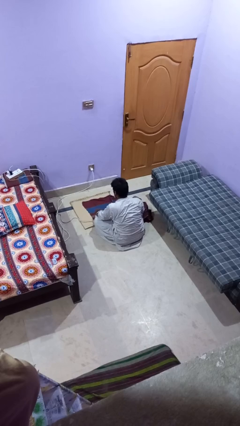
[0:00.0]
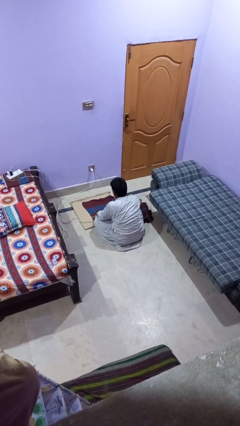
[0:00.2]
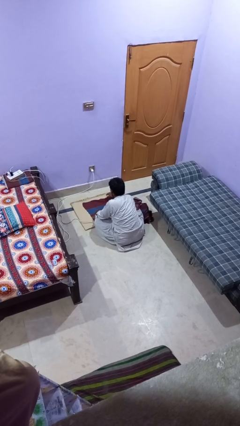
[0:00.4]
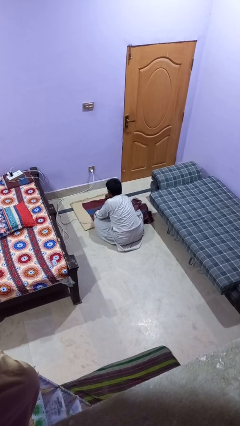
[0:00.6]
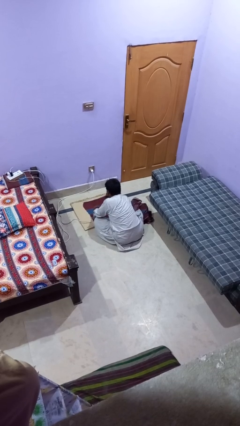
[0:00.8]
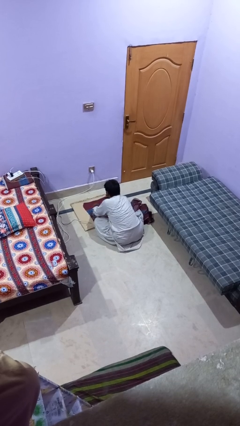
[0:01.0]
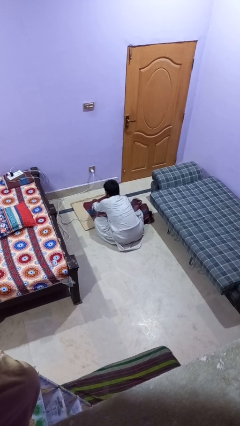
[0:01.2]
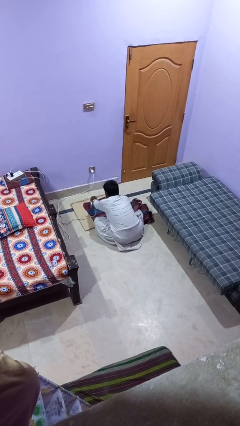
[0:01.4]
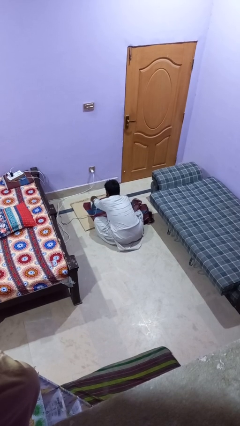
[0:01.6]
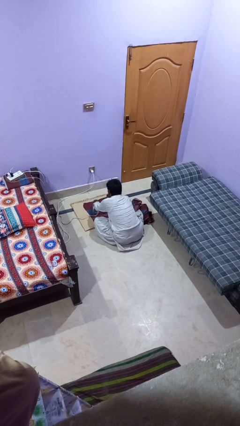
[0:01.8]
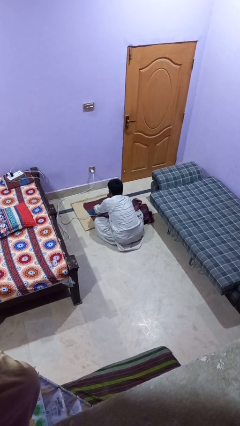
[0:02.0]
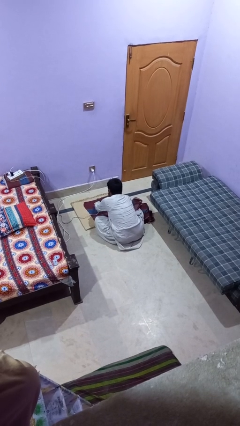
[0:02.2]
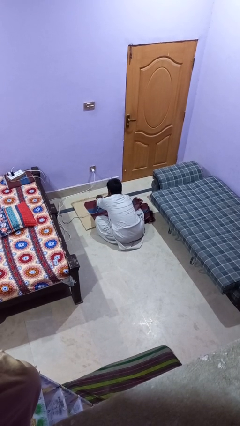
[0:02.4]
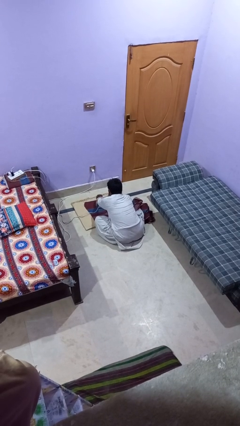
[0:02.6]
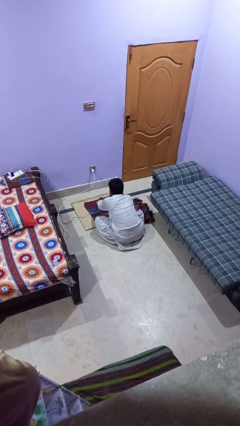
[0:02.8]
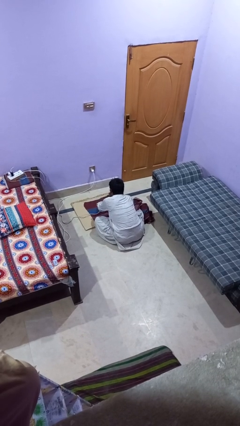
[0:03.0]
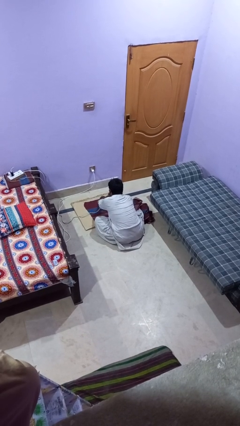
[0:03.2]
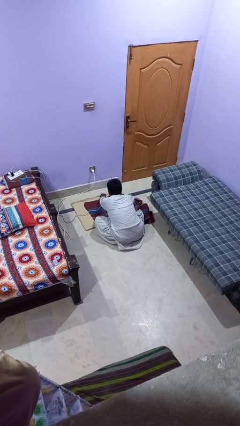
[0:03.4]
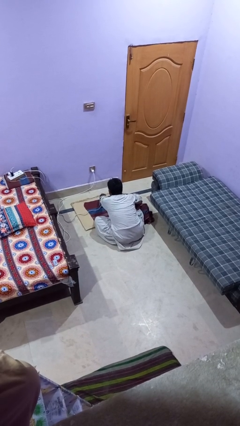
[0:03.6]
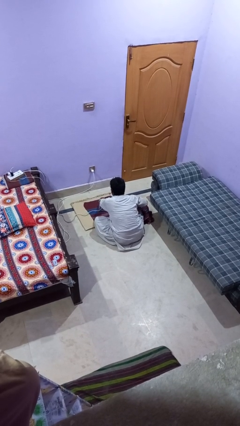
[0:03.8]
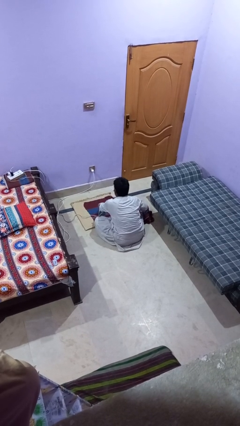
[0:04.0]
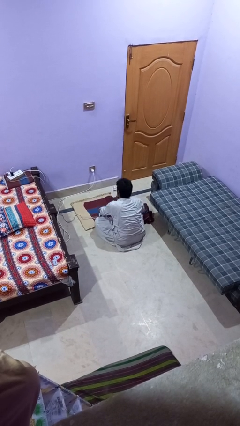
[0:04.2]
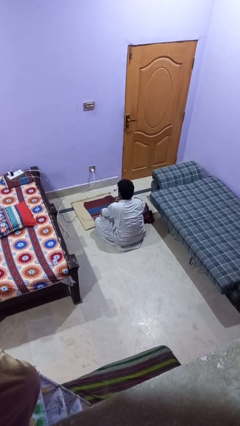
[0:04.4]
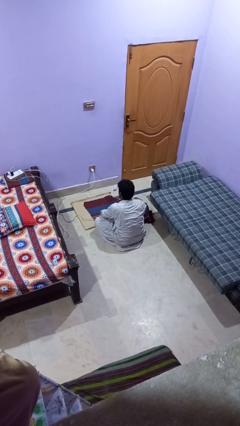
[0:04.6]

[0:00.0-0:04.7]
person irons clothes

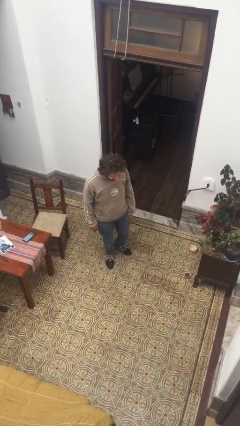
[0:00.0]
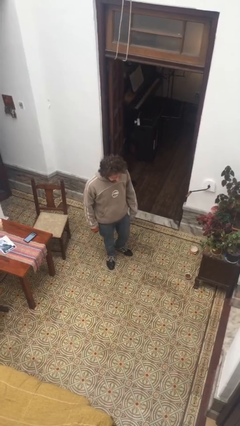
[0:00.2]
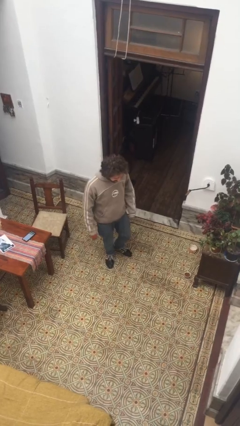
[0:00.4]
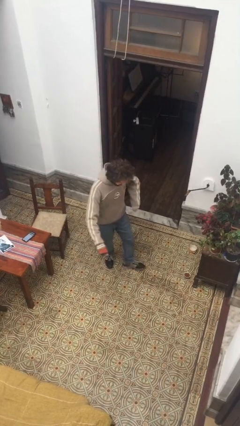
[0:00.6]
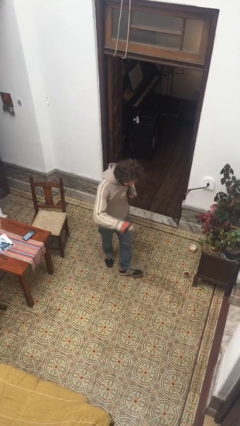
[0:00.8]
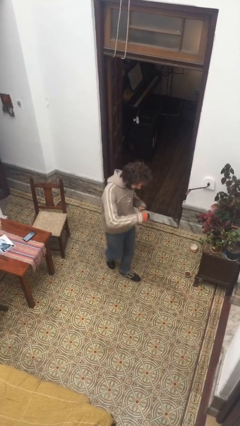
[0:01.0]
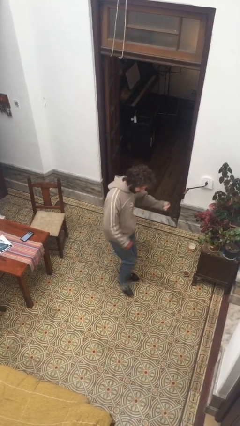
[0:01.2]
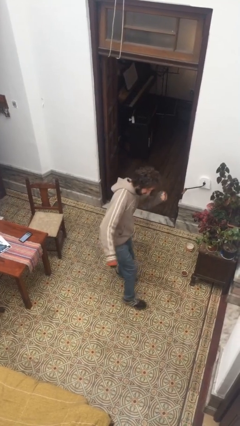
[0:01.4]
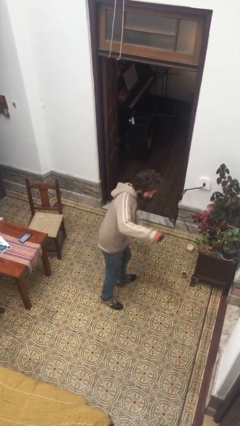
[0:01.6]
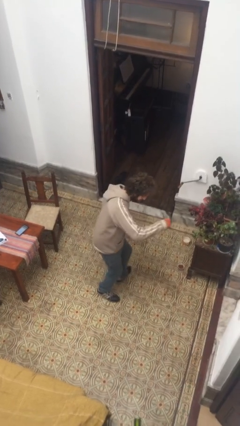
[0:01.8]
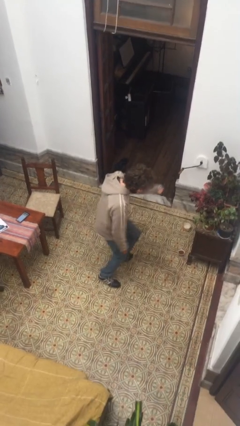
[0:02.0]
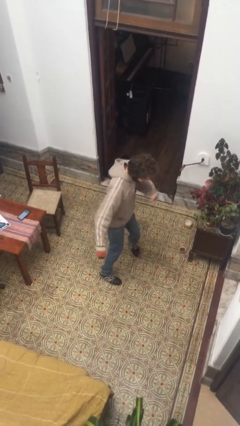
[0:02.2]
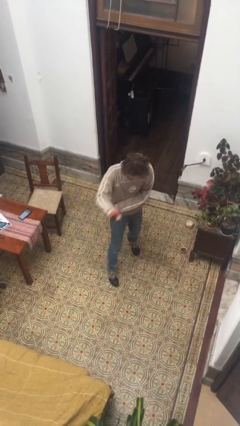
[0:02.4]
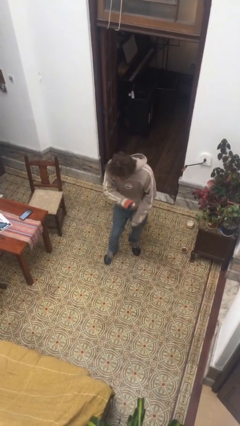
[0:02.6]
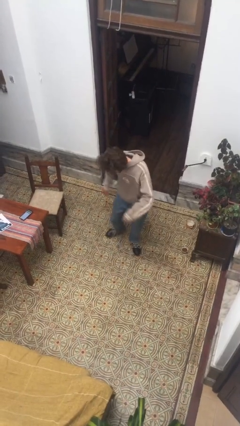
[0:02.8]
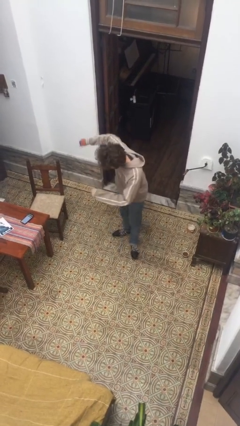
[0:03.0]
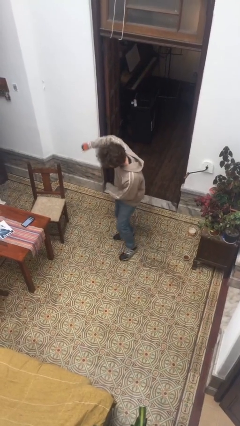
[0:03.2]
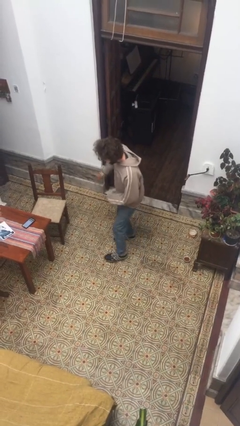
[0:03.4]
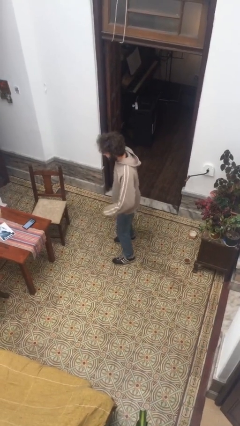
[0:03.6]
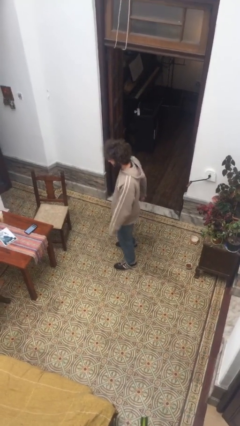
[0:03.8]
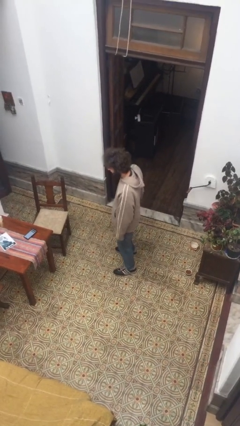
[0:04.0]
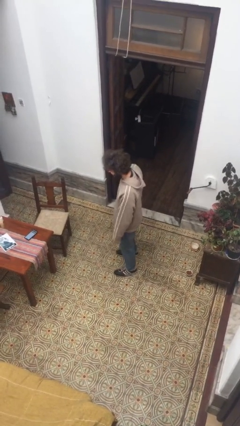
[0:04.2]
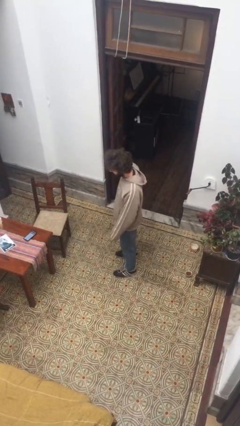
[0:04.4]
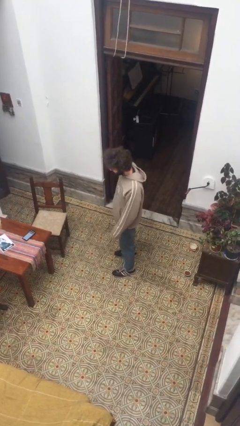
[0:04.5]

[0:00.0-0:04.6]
person dances in place

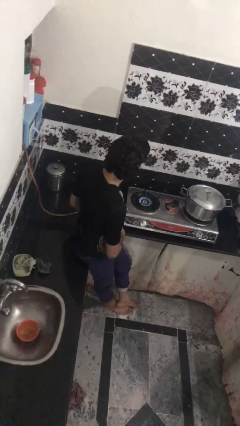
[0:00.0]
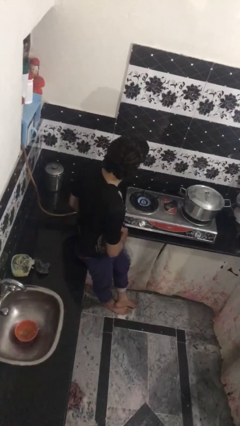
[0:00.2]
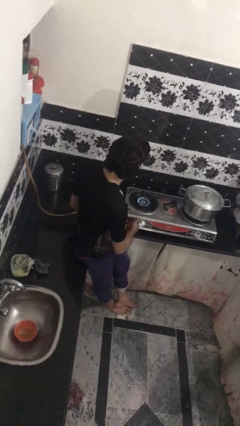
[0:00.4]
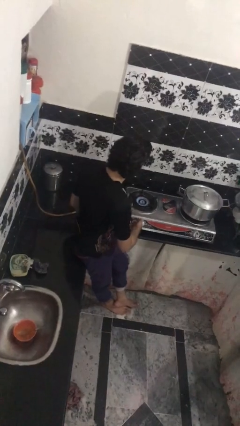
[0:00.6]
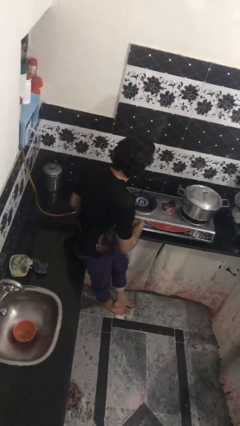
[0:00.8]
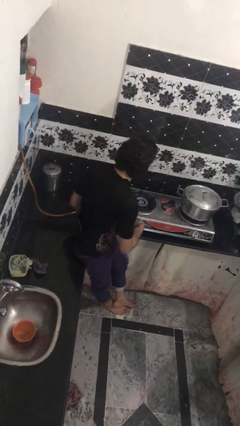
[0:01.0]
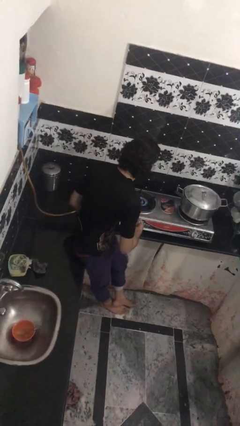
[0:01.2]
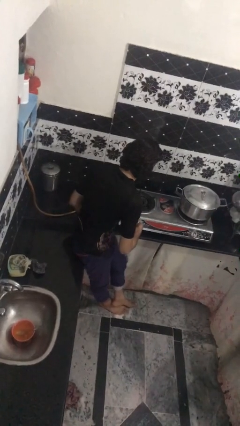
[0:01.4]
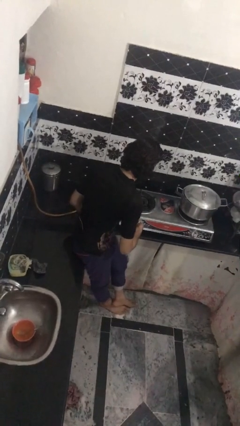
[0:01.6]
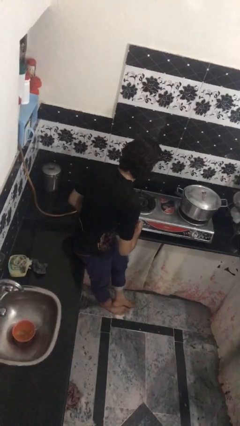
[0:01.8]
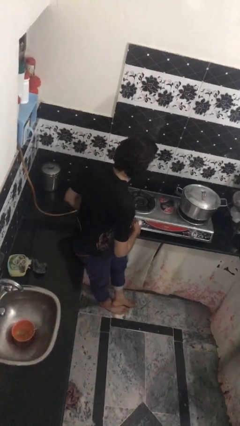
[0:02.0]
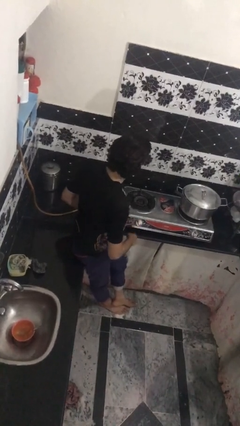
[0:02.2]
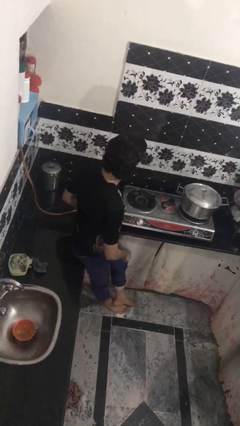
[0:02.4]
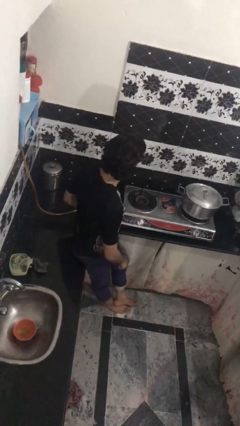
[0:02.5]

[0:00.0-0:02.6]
person turns off stovetop

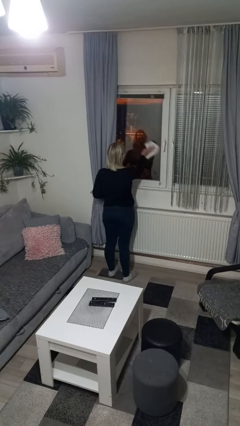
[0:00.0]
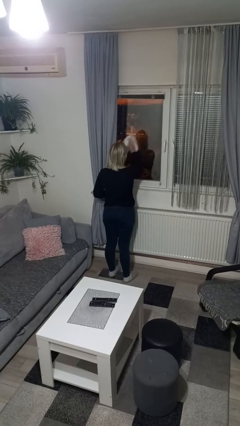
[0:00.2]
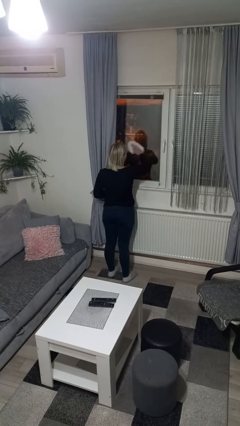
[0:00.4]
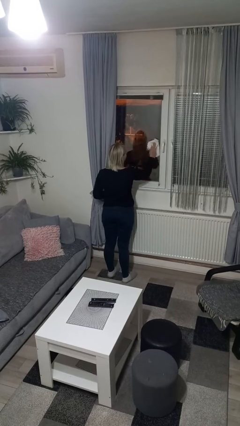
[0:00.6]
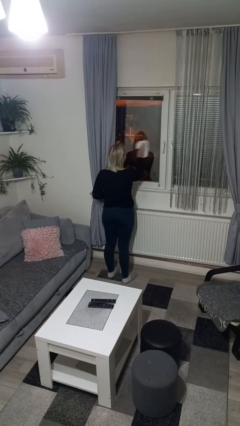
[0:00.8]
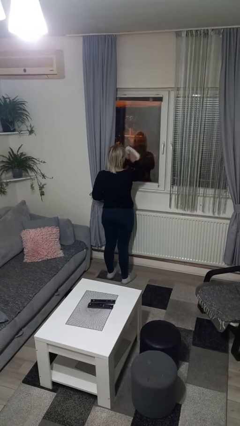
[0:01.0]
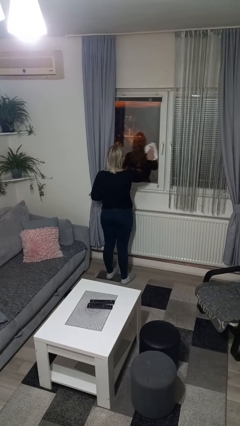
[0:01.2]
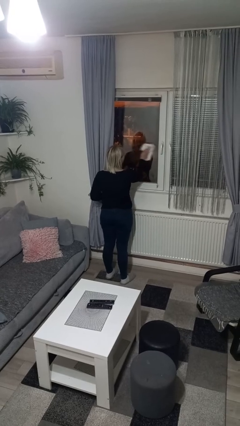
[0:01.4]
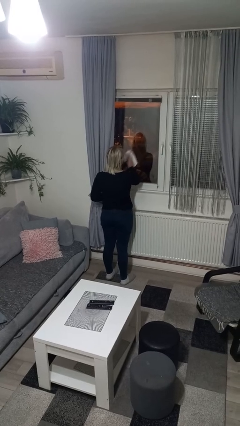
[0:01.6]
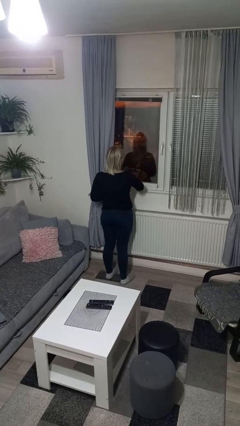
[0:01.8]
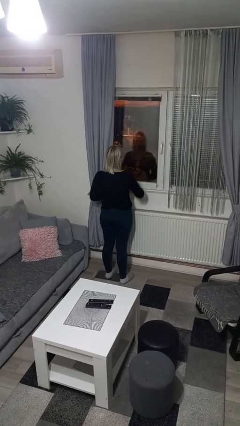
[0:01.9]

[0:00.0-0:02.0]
person washes window

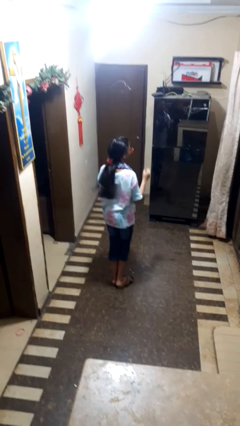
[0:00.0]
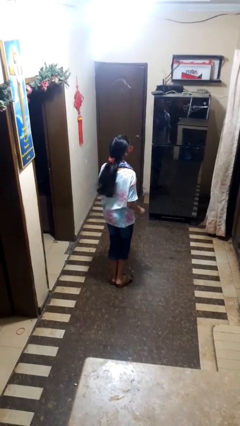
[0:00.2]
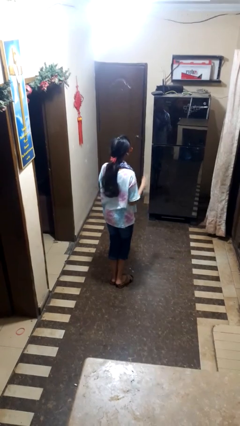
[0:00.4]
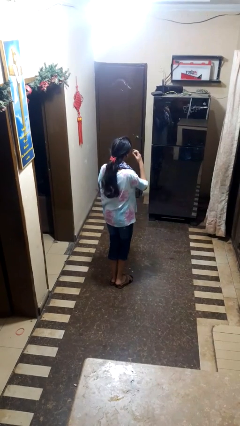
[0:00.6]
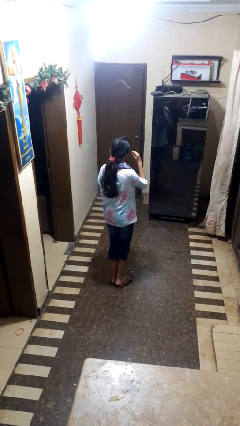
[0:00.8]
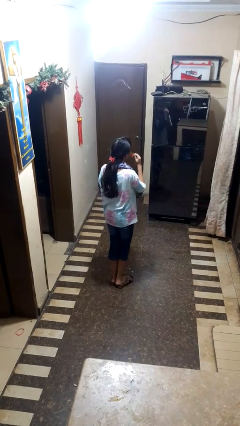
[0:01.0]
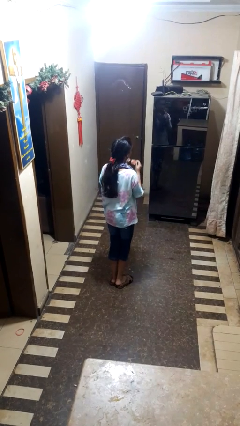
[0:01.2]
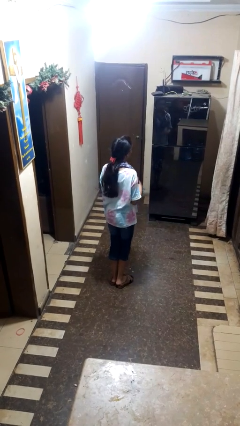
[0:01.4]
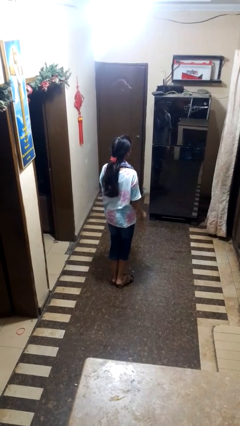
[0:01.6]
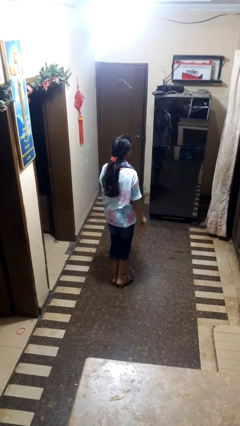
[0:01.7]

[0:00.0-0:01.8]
person takes off sunglasses

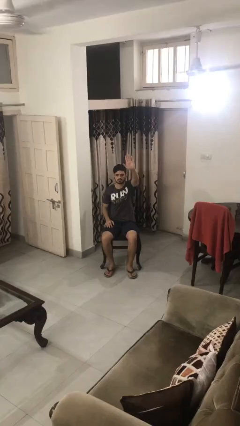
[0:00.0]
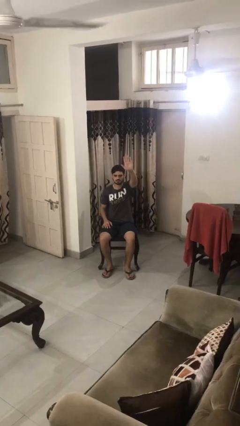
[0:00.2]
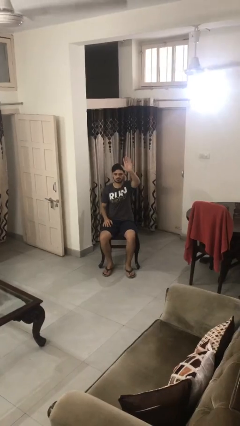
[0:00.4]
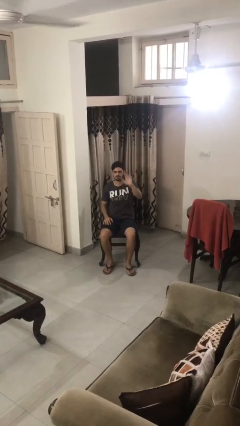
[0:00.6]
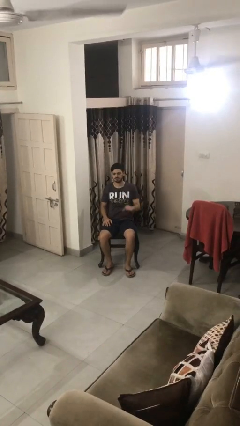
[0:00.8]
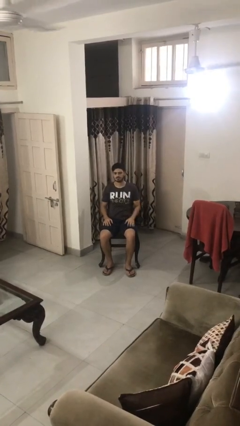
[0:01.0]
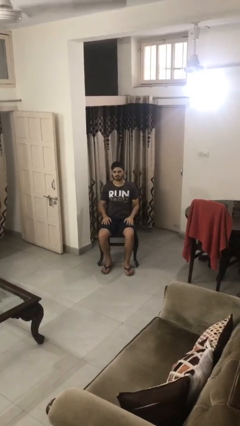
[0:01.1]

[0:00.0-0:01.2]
person gestures lower hand

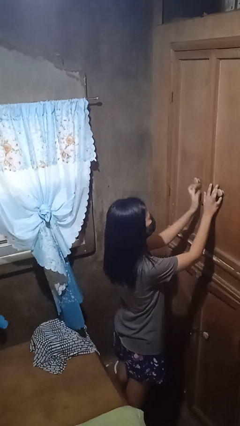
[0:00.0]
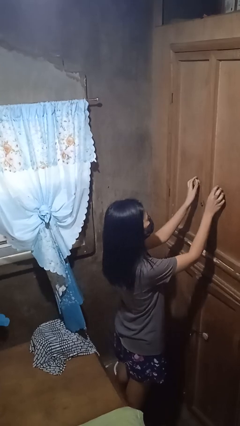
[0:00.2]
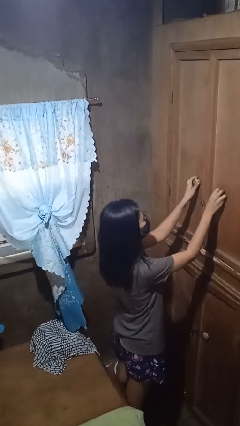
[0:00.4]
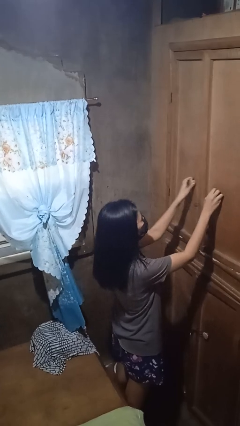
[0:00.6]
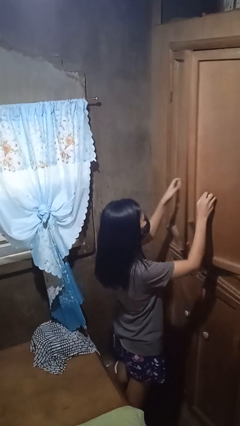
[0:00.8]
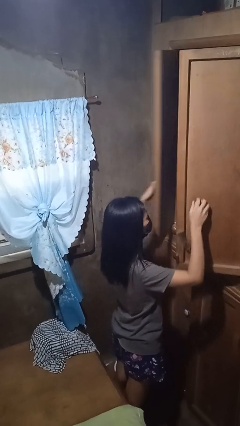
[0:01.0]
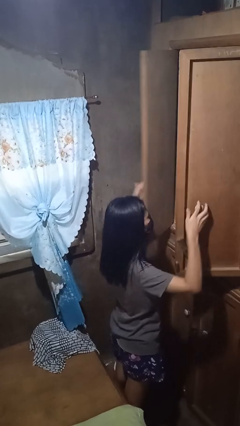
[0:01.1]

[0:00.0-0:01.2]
person opens closet door
